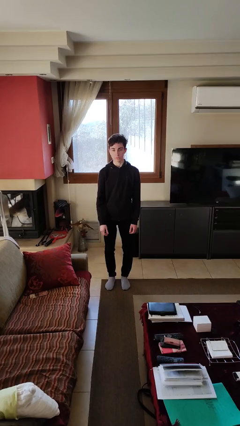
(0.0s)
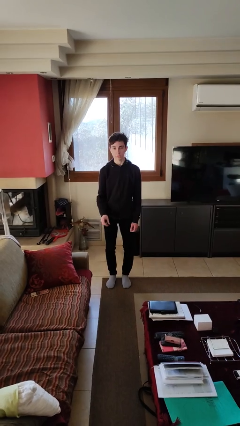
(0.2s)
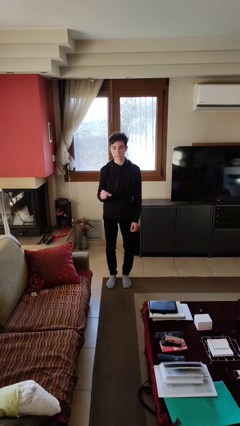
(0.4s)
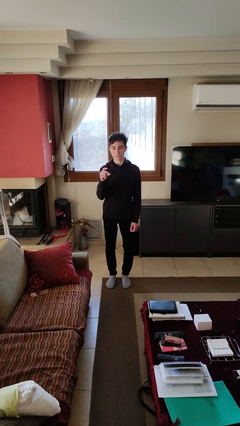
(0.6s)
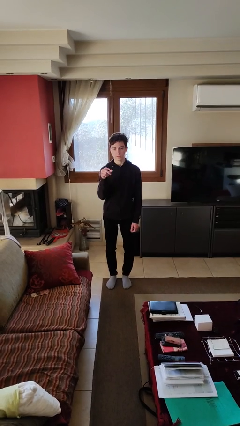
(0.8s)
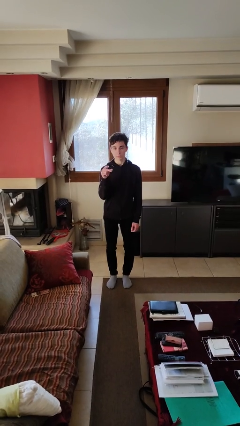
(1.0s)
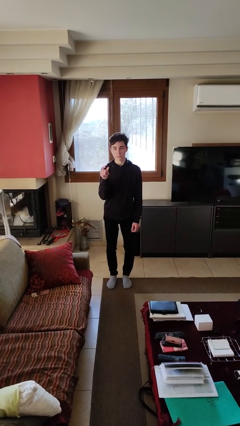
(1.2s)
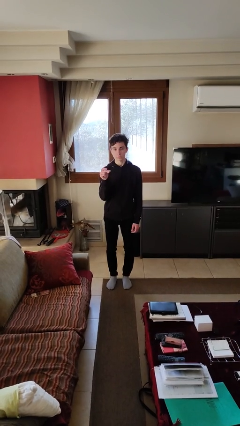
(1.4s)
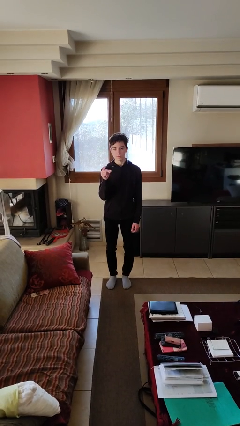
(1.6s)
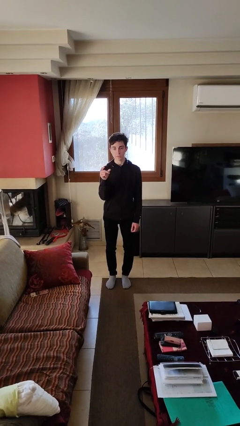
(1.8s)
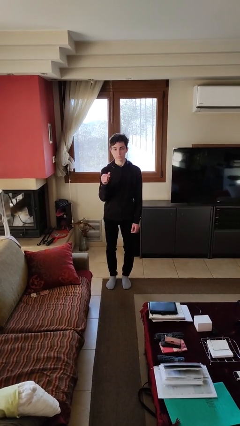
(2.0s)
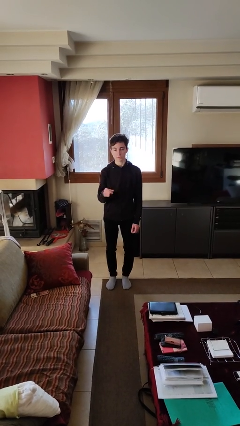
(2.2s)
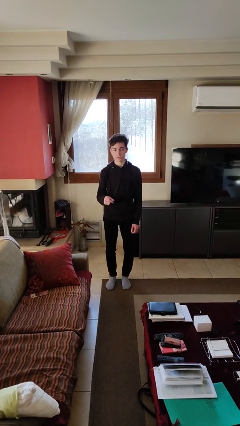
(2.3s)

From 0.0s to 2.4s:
person snaps fingers

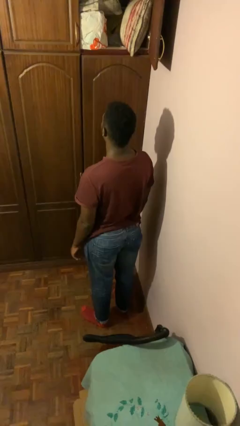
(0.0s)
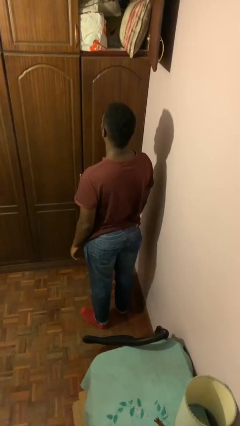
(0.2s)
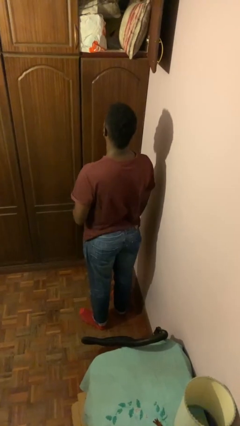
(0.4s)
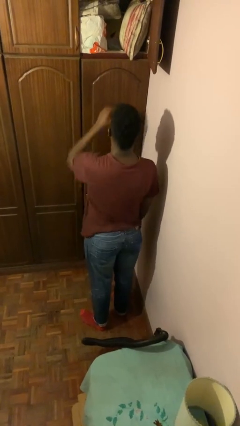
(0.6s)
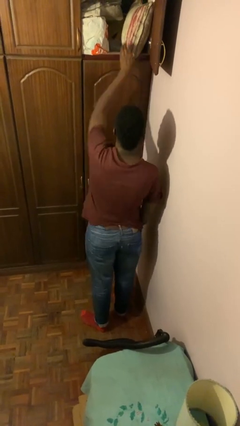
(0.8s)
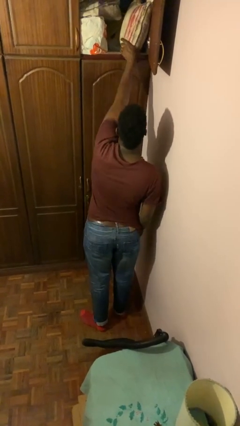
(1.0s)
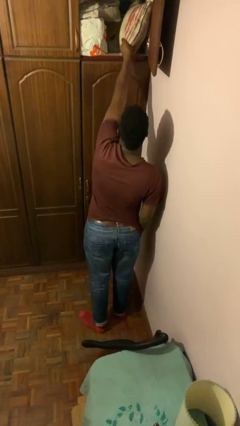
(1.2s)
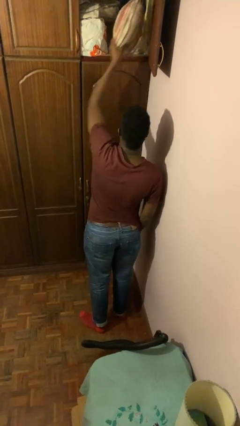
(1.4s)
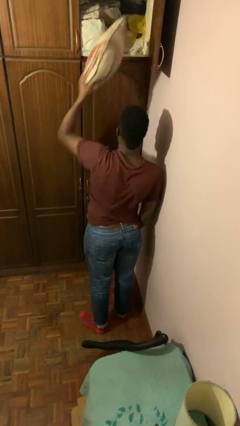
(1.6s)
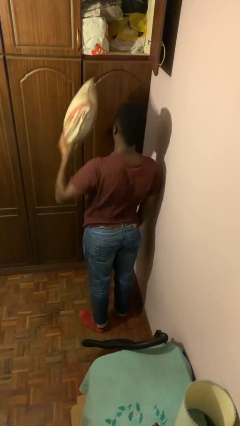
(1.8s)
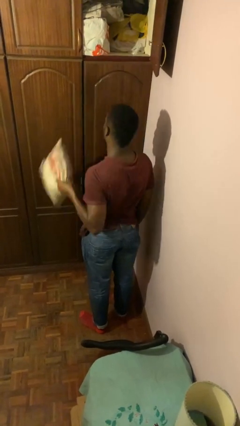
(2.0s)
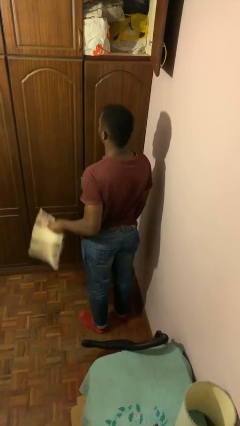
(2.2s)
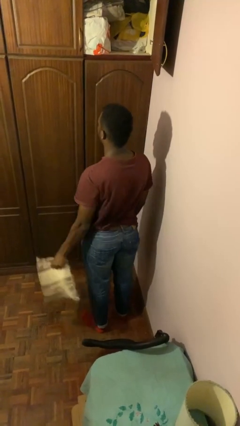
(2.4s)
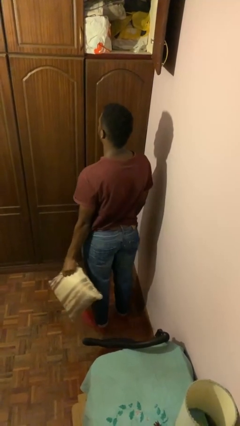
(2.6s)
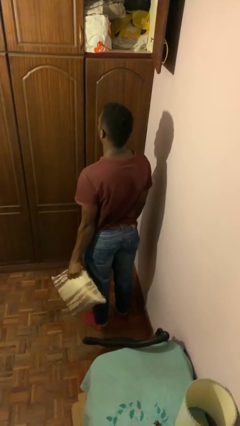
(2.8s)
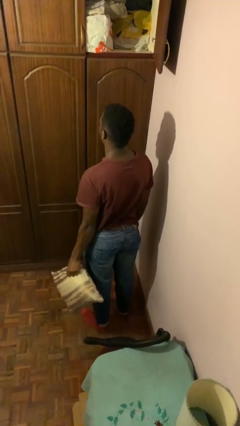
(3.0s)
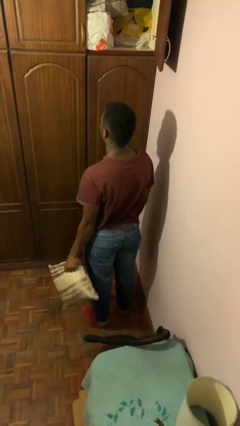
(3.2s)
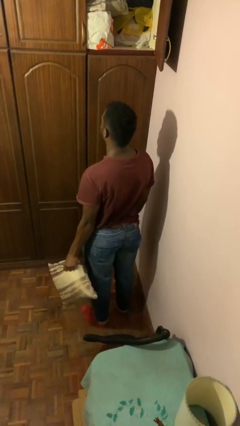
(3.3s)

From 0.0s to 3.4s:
person picks up object from shelf

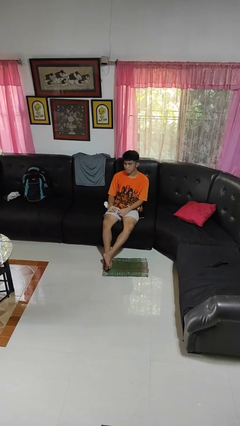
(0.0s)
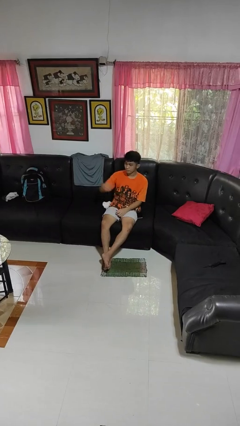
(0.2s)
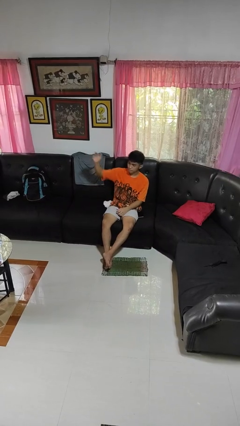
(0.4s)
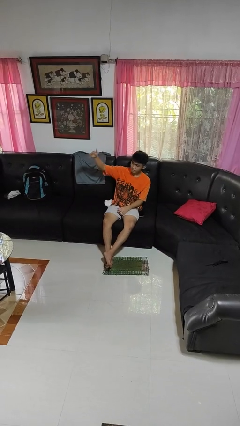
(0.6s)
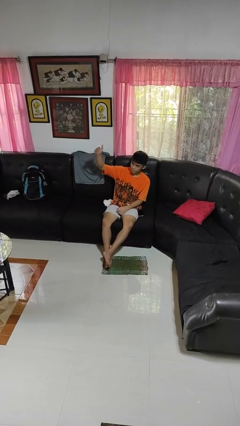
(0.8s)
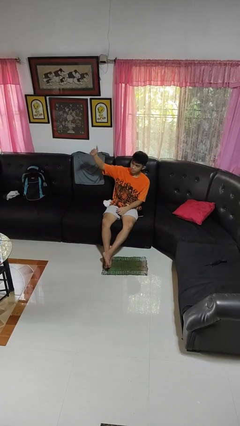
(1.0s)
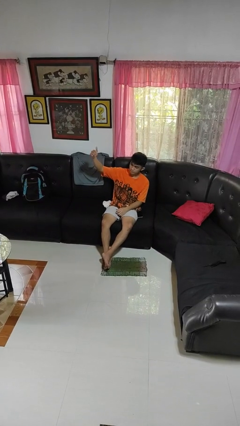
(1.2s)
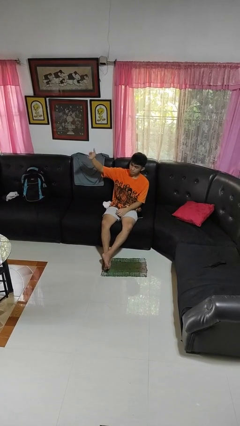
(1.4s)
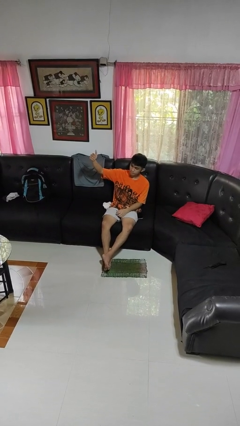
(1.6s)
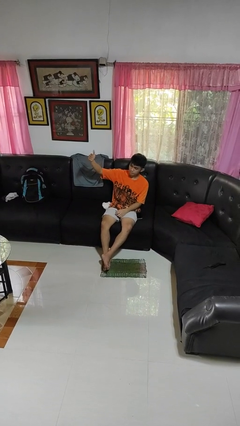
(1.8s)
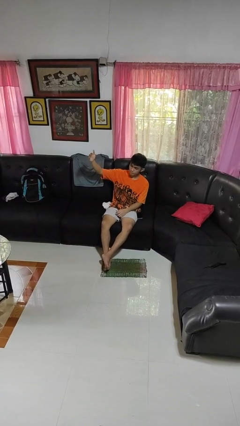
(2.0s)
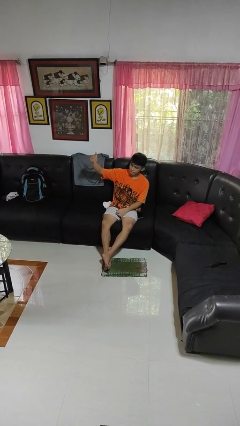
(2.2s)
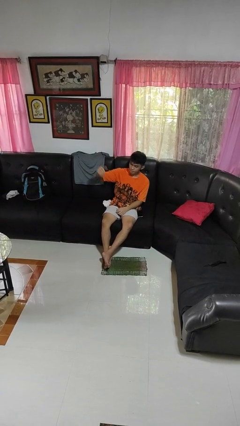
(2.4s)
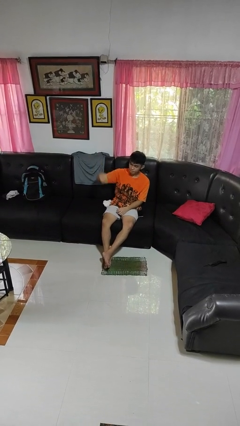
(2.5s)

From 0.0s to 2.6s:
person gestures come here

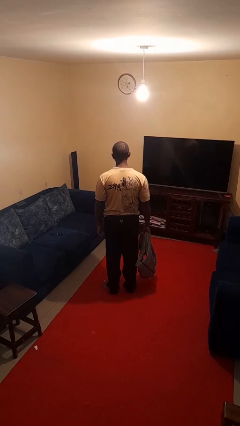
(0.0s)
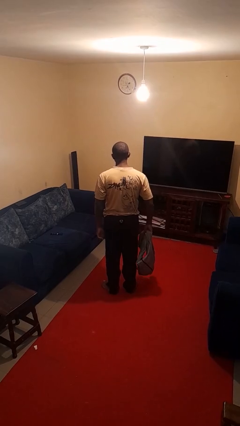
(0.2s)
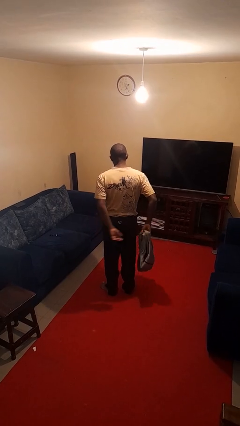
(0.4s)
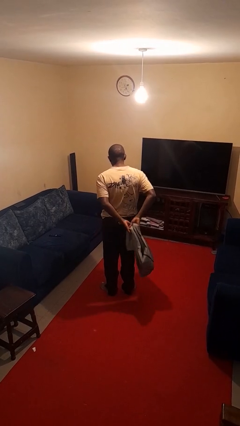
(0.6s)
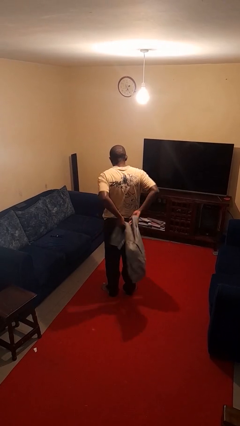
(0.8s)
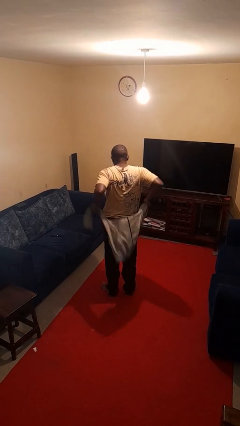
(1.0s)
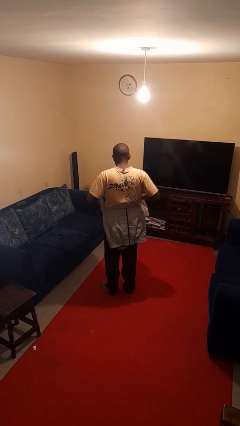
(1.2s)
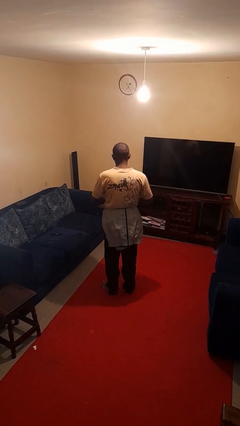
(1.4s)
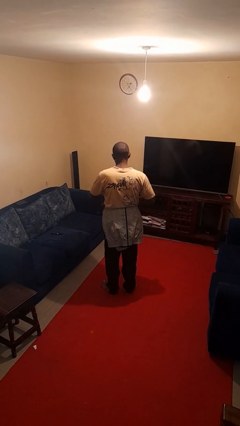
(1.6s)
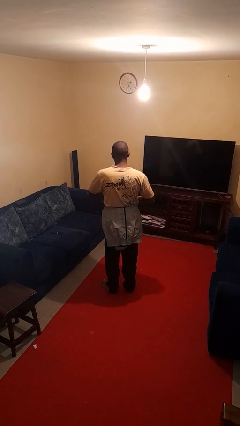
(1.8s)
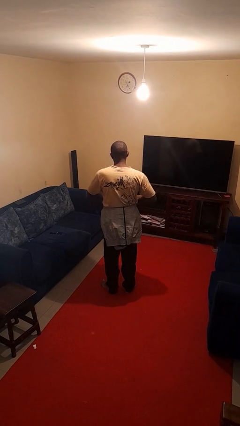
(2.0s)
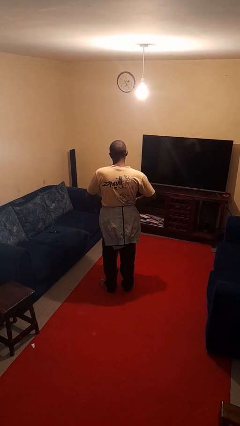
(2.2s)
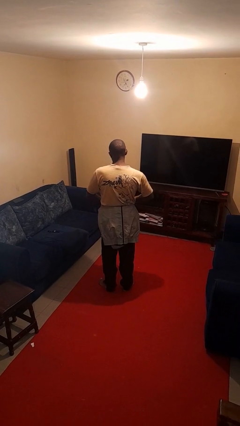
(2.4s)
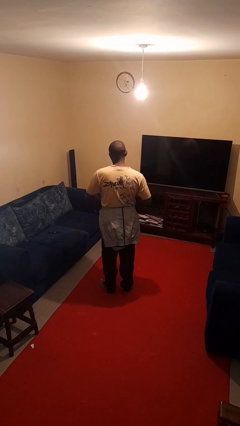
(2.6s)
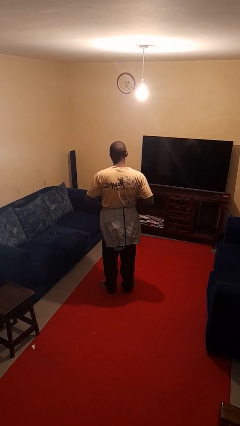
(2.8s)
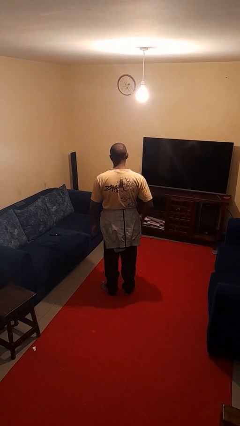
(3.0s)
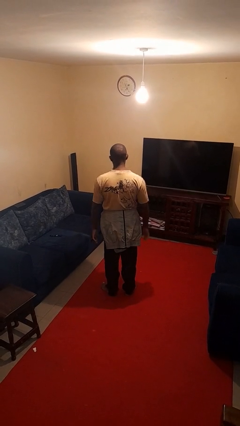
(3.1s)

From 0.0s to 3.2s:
person ties jacket around waist

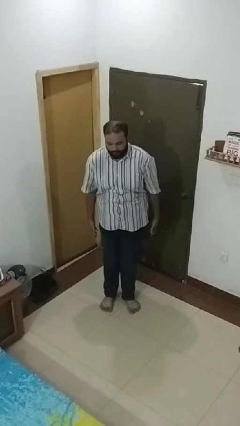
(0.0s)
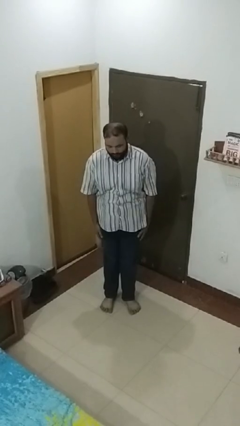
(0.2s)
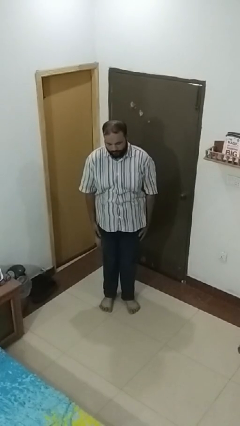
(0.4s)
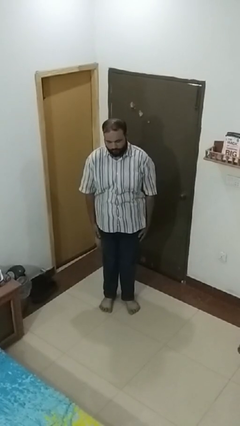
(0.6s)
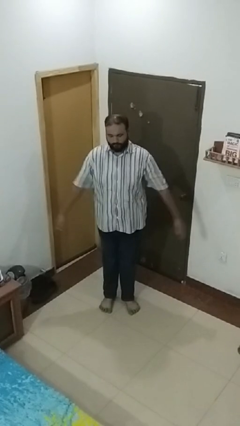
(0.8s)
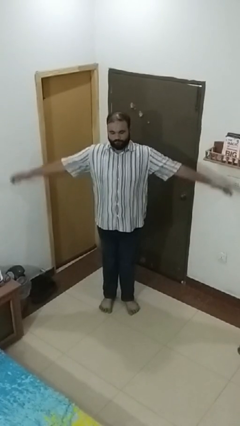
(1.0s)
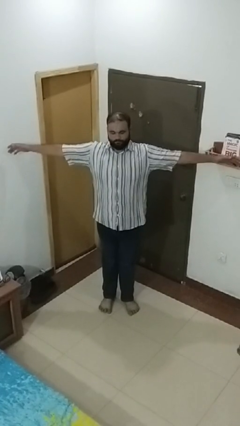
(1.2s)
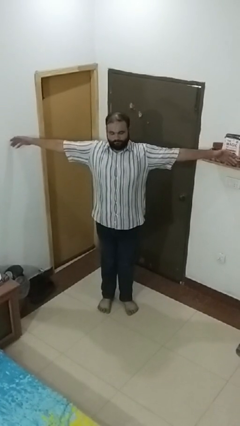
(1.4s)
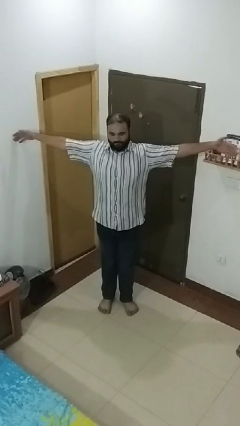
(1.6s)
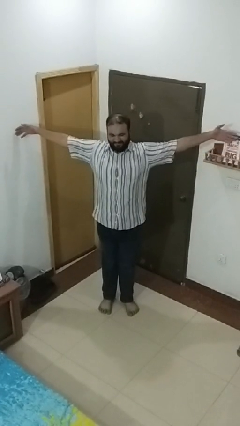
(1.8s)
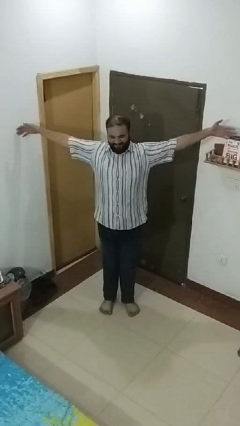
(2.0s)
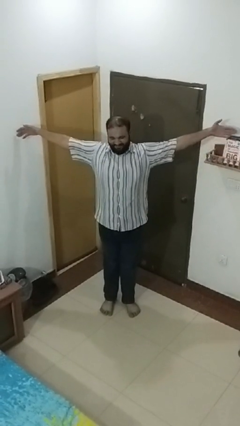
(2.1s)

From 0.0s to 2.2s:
person stretches arms to side

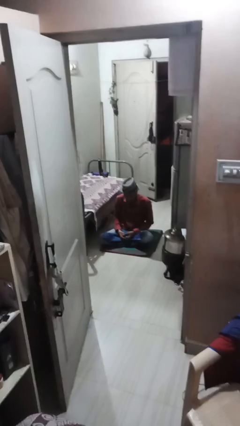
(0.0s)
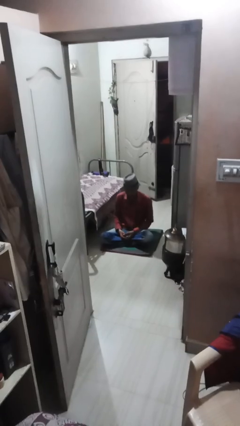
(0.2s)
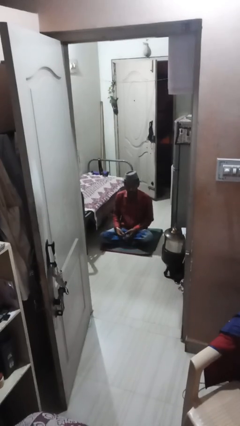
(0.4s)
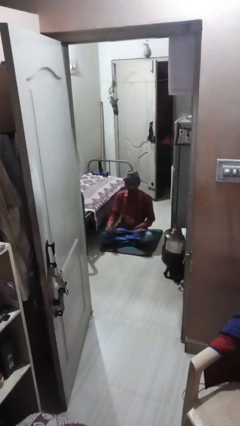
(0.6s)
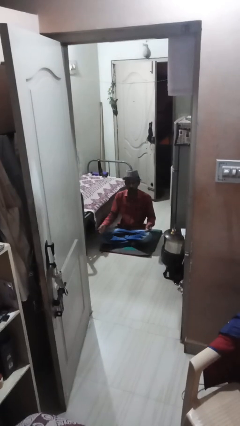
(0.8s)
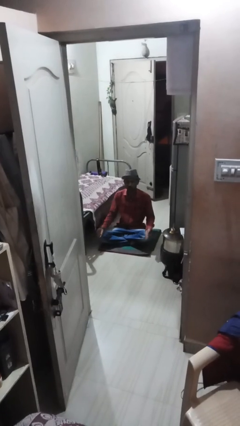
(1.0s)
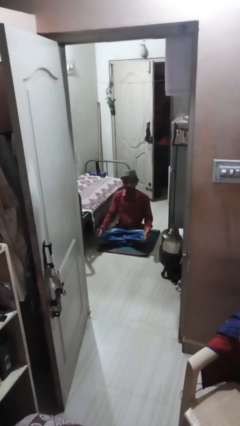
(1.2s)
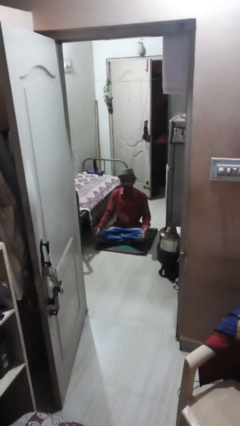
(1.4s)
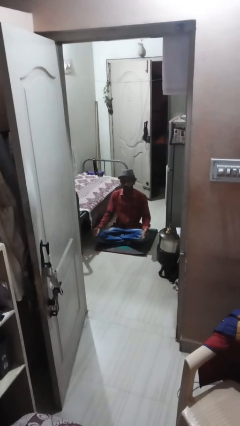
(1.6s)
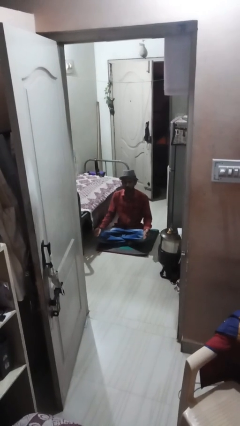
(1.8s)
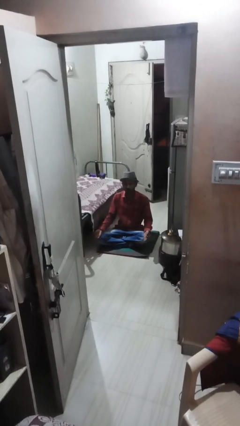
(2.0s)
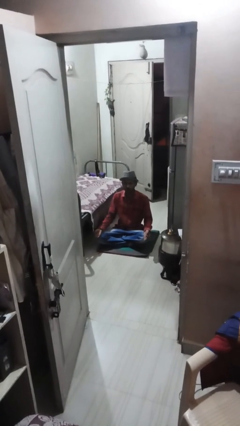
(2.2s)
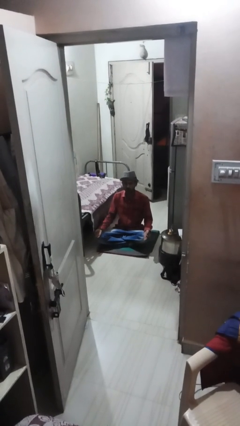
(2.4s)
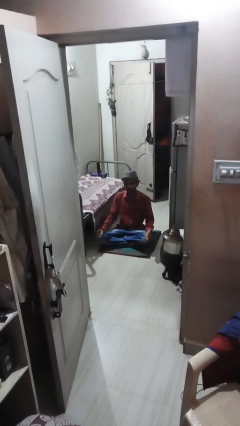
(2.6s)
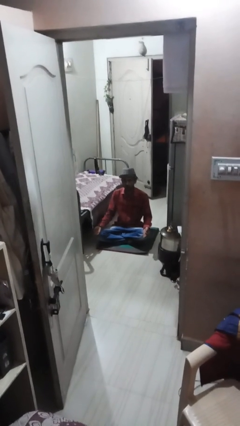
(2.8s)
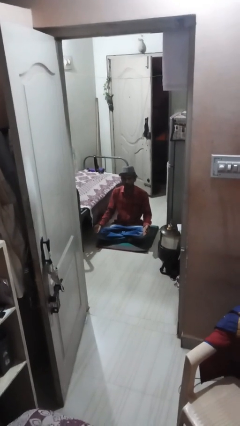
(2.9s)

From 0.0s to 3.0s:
person prays

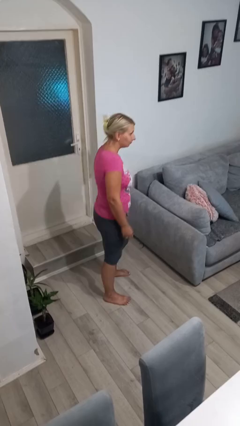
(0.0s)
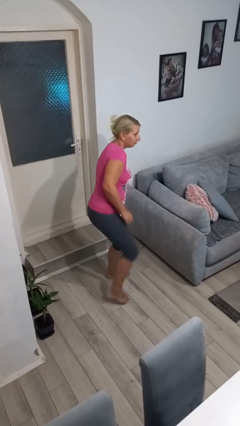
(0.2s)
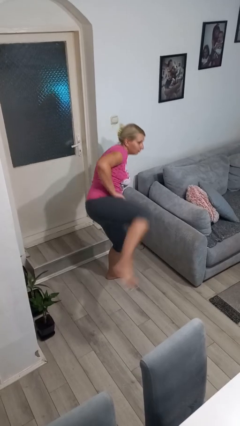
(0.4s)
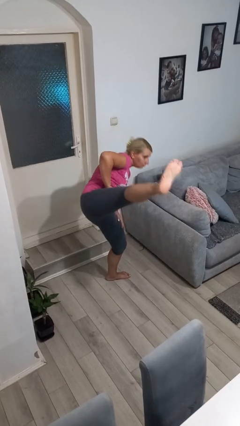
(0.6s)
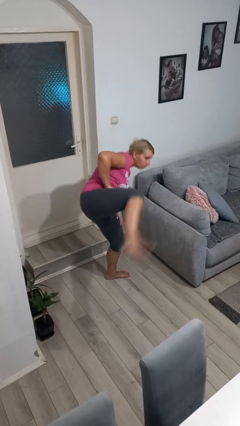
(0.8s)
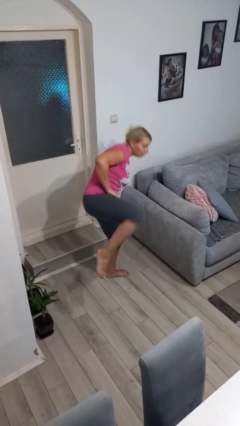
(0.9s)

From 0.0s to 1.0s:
person karate kicks
